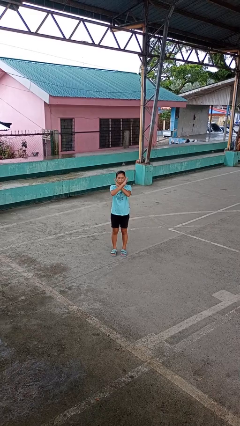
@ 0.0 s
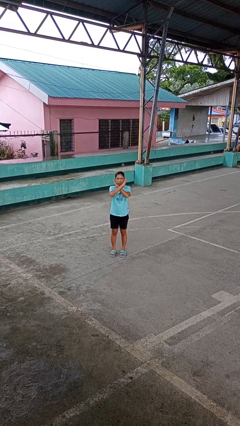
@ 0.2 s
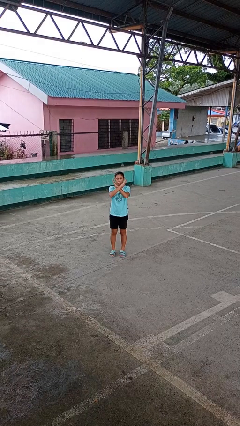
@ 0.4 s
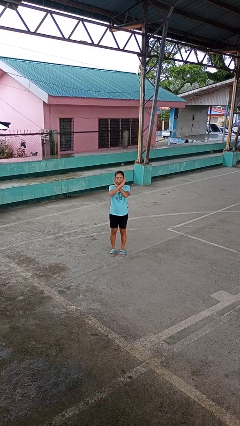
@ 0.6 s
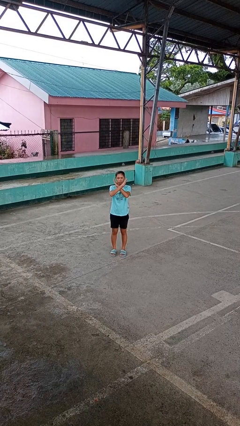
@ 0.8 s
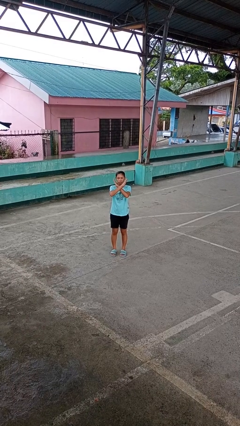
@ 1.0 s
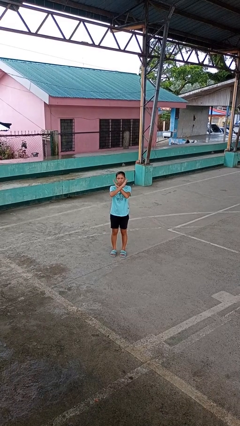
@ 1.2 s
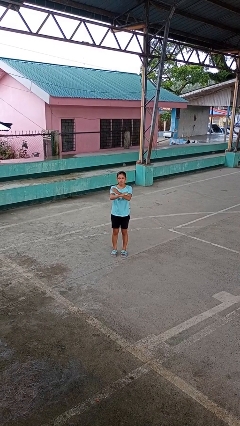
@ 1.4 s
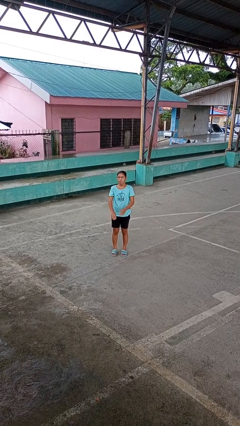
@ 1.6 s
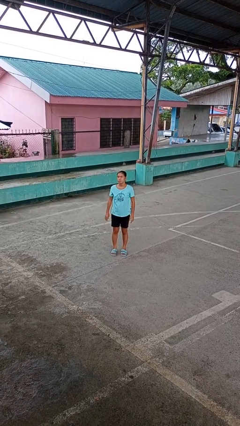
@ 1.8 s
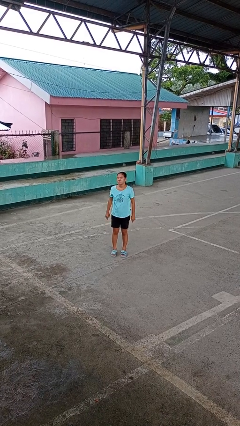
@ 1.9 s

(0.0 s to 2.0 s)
person gestures arms x

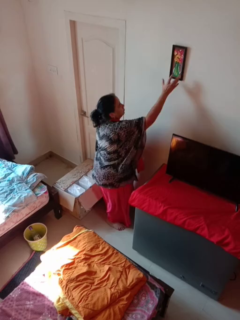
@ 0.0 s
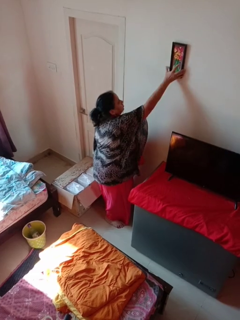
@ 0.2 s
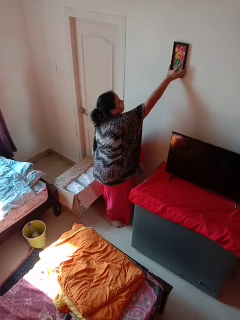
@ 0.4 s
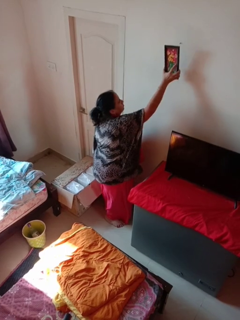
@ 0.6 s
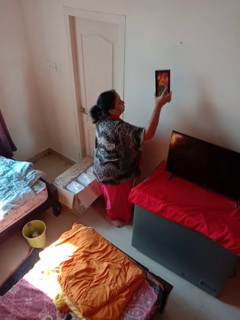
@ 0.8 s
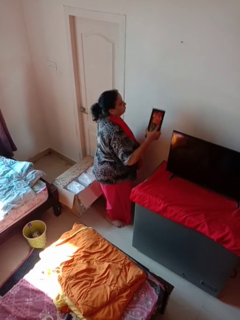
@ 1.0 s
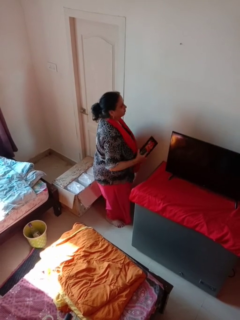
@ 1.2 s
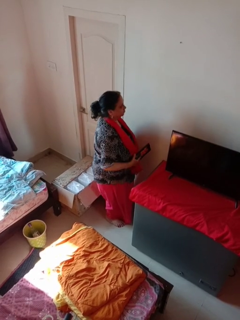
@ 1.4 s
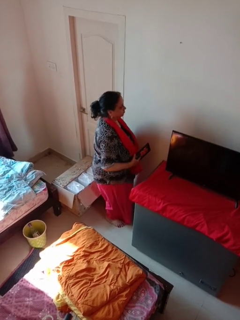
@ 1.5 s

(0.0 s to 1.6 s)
person takes down picture frame

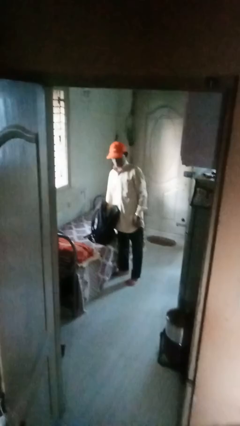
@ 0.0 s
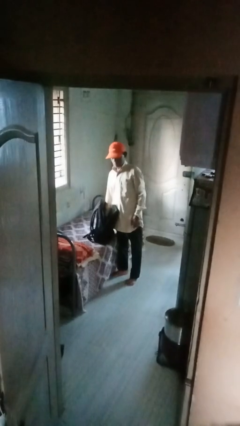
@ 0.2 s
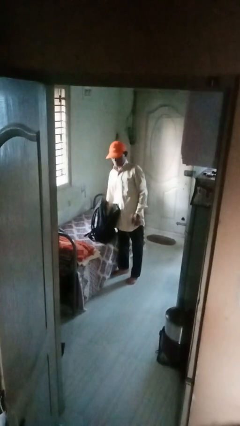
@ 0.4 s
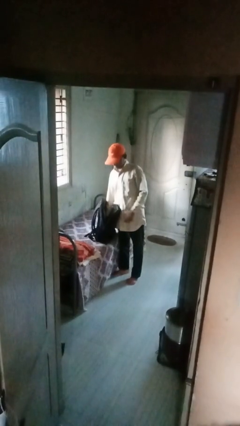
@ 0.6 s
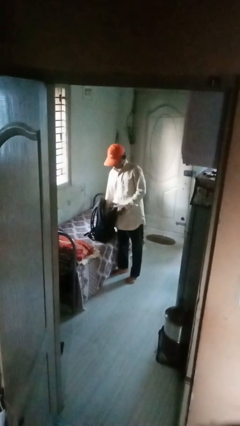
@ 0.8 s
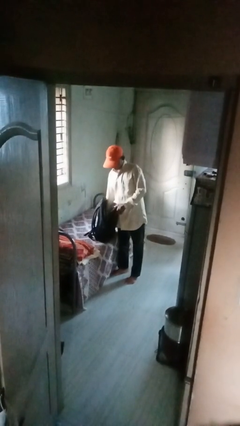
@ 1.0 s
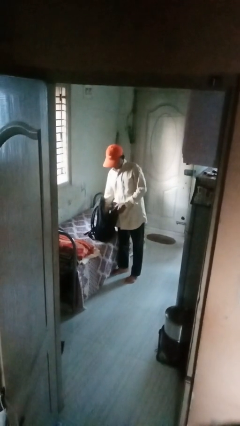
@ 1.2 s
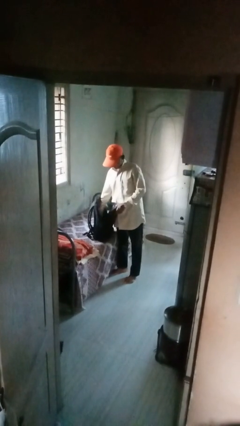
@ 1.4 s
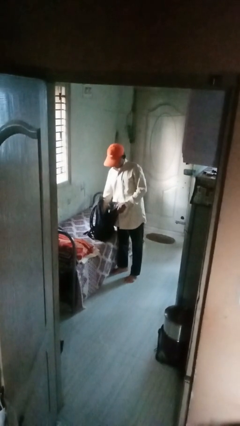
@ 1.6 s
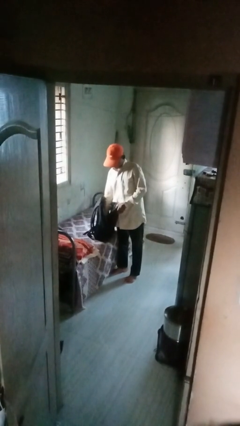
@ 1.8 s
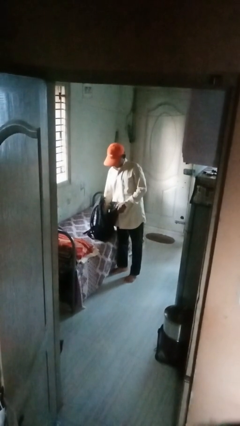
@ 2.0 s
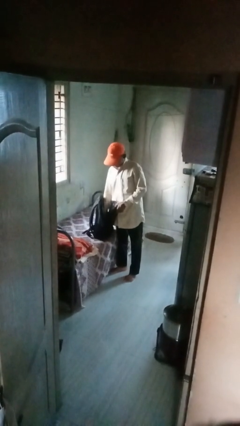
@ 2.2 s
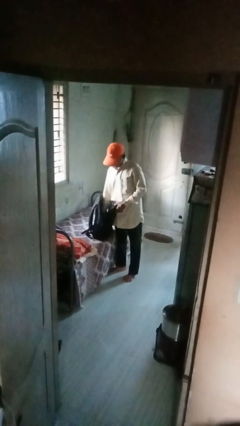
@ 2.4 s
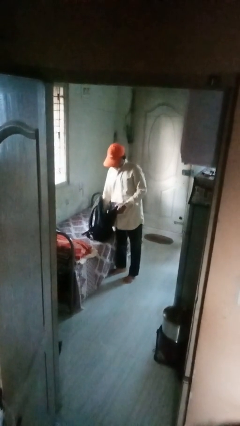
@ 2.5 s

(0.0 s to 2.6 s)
person searches in backpack

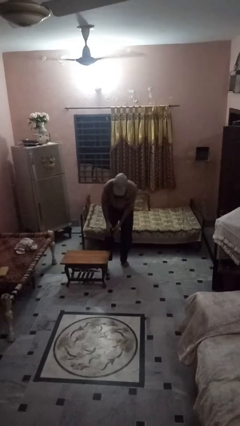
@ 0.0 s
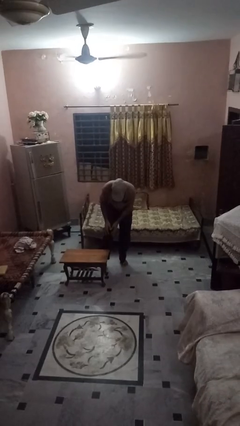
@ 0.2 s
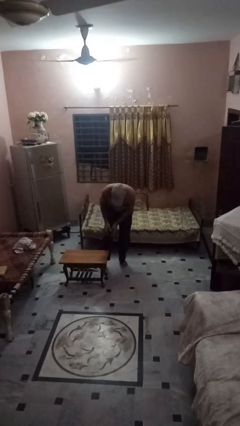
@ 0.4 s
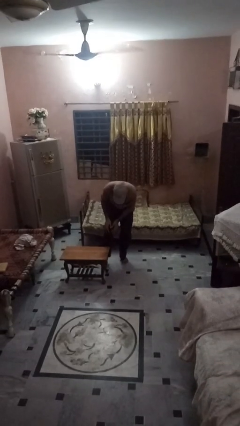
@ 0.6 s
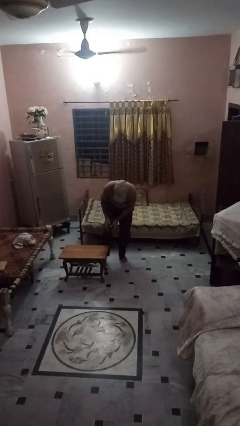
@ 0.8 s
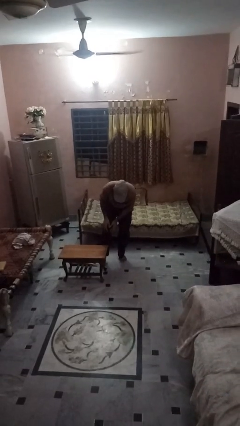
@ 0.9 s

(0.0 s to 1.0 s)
person lies down on floor

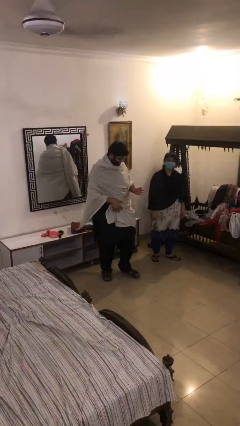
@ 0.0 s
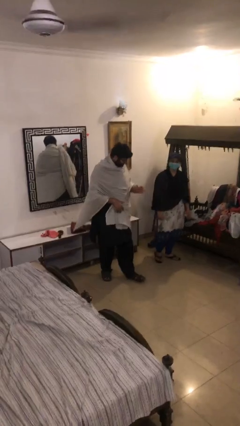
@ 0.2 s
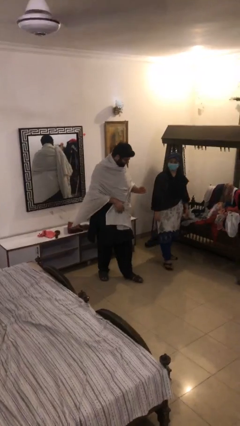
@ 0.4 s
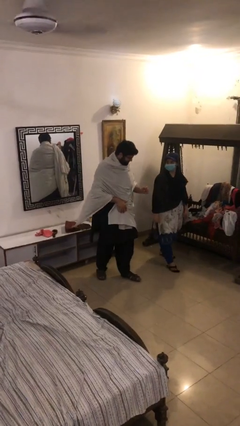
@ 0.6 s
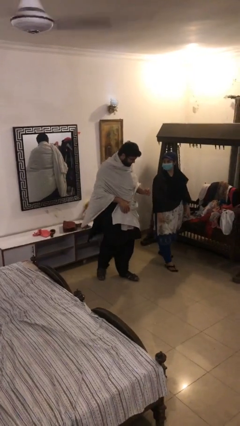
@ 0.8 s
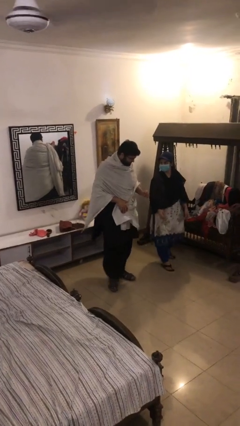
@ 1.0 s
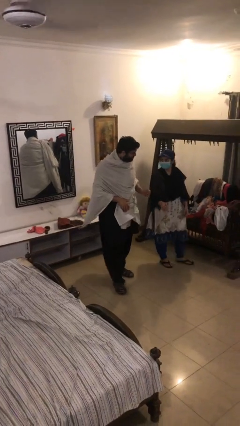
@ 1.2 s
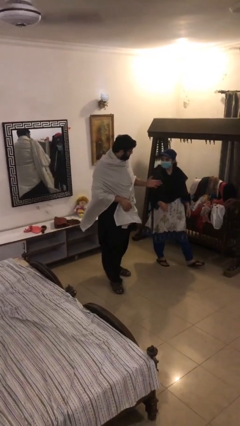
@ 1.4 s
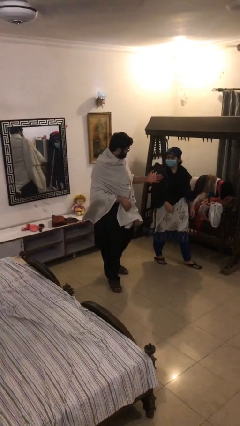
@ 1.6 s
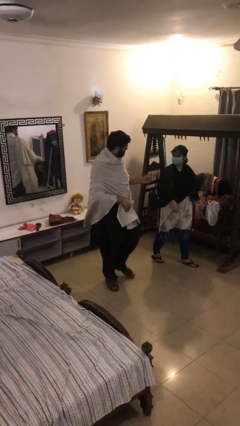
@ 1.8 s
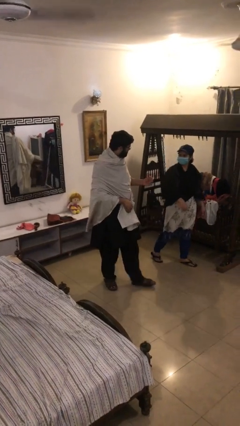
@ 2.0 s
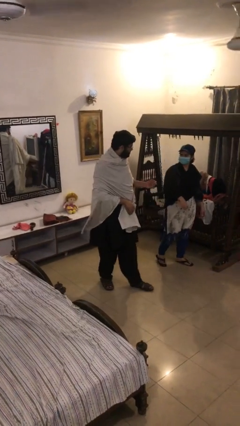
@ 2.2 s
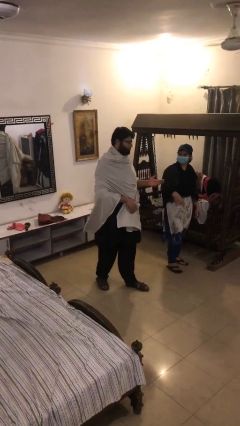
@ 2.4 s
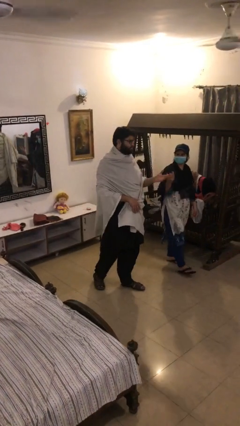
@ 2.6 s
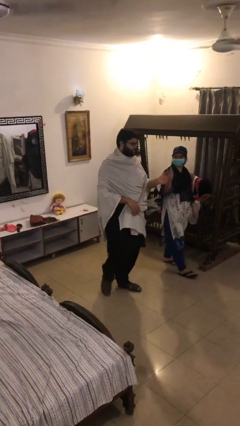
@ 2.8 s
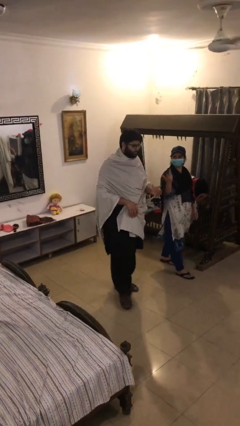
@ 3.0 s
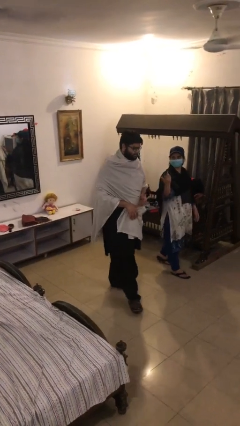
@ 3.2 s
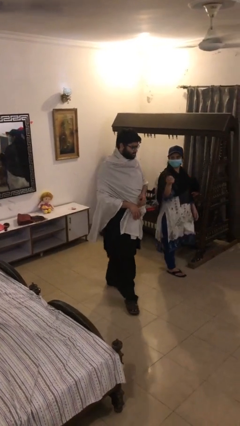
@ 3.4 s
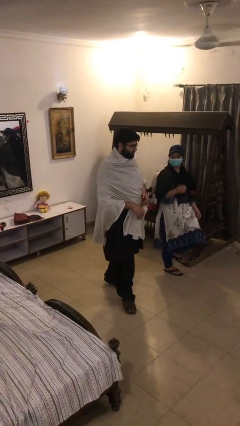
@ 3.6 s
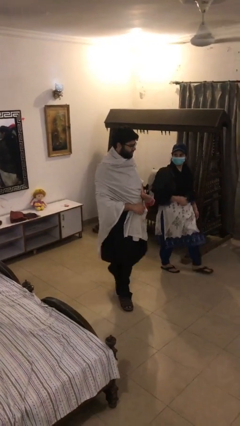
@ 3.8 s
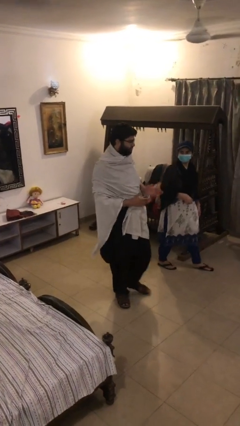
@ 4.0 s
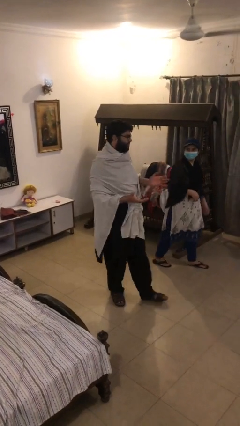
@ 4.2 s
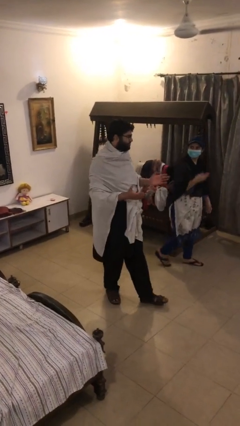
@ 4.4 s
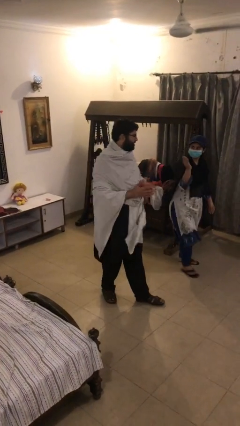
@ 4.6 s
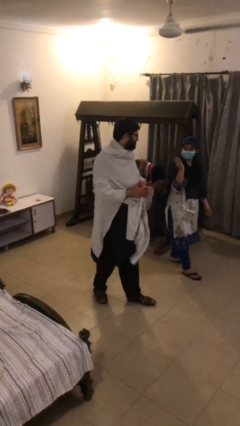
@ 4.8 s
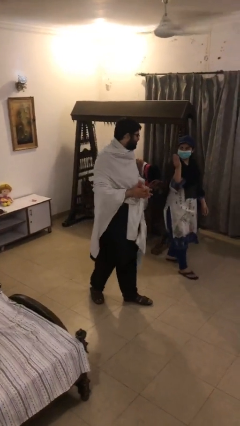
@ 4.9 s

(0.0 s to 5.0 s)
person talks to person

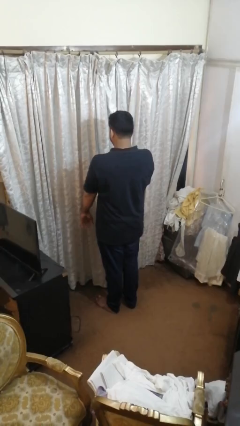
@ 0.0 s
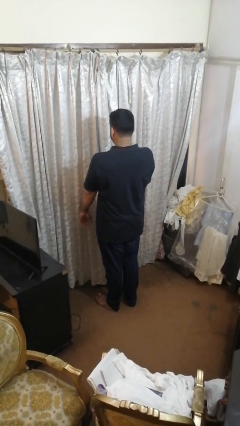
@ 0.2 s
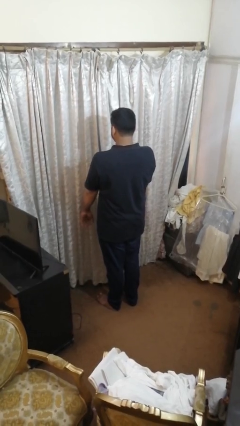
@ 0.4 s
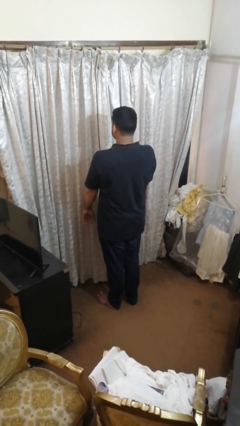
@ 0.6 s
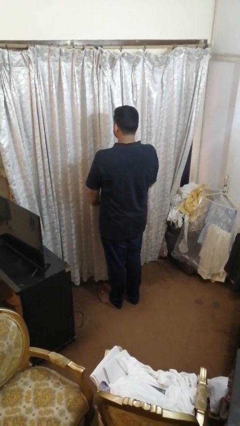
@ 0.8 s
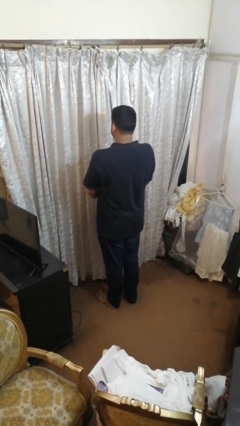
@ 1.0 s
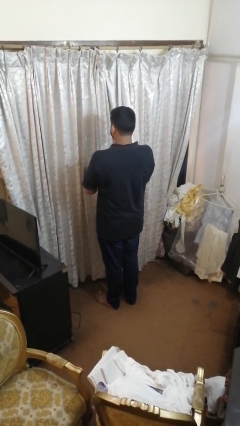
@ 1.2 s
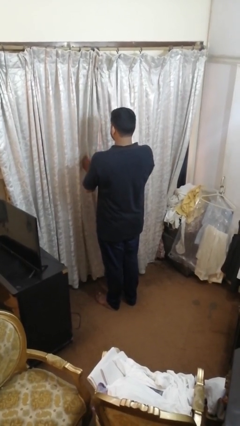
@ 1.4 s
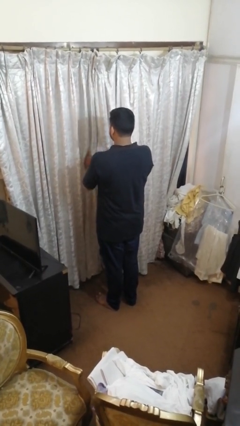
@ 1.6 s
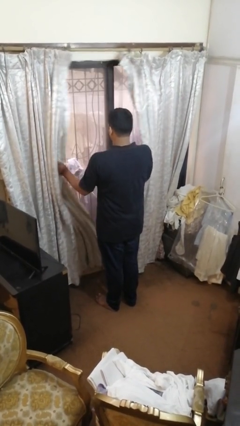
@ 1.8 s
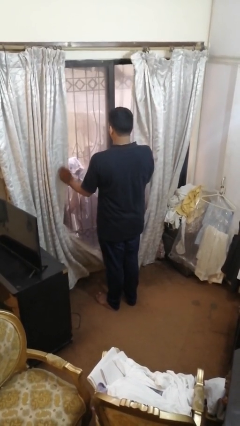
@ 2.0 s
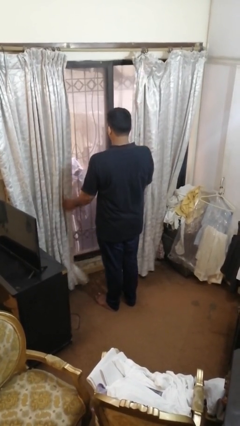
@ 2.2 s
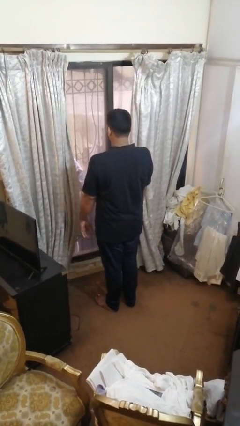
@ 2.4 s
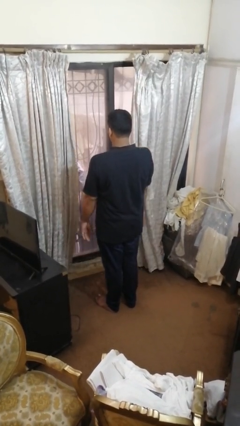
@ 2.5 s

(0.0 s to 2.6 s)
person opens curtains

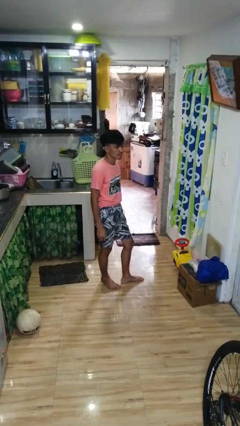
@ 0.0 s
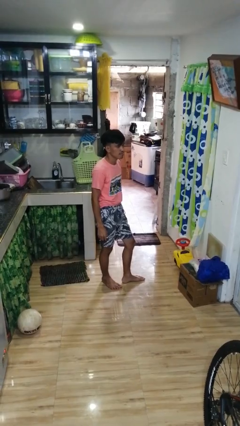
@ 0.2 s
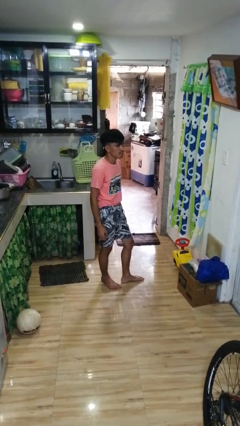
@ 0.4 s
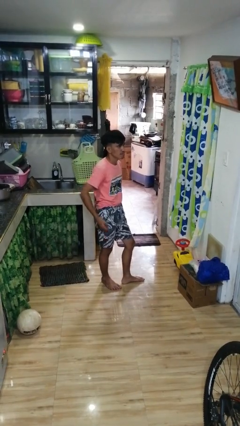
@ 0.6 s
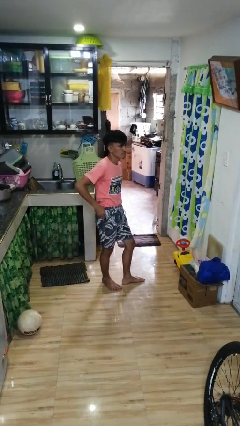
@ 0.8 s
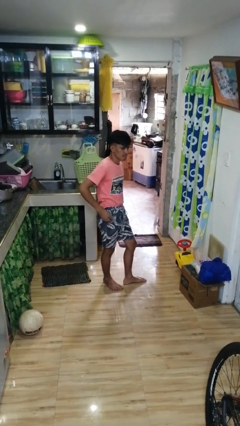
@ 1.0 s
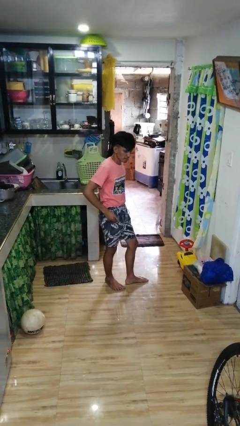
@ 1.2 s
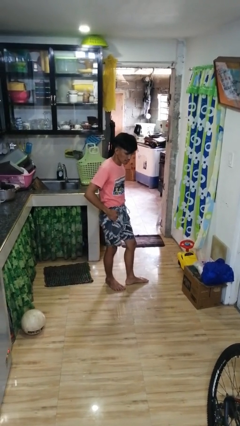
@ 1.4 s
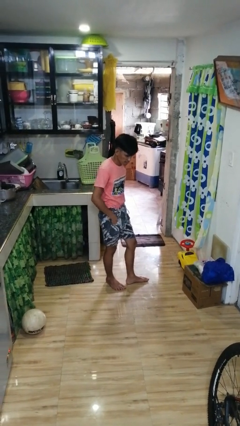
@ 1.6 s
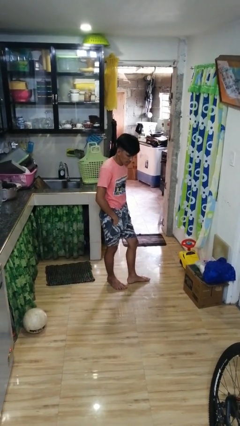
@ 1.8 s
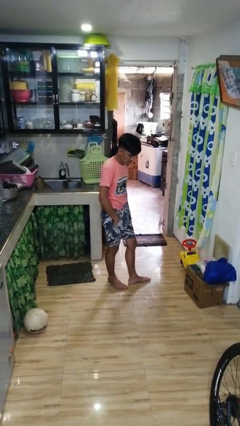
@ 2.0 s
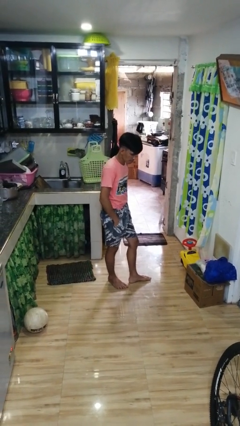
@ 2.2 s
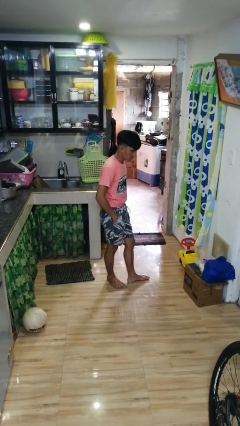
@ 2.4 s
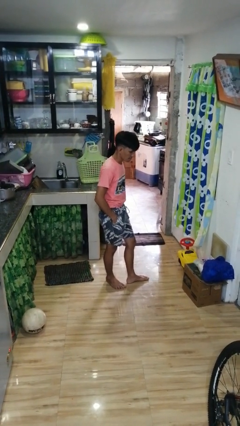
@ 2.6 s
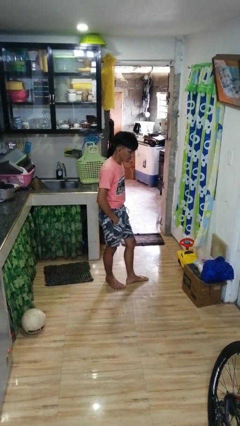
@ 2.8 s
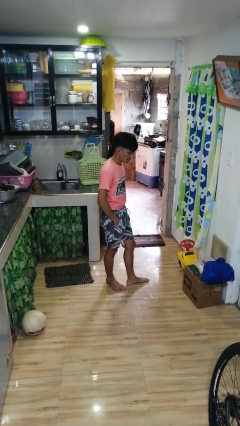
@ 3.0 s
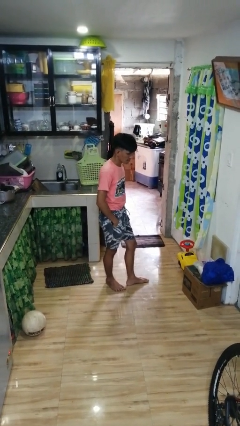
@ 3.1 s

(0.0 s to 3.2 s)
person puts hands in back pockets
